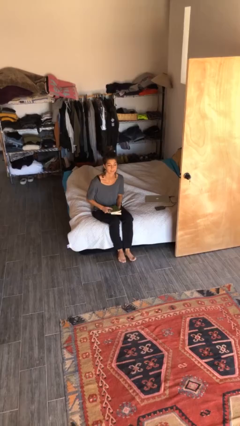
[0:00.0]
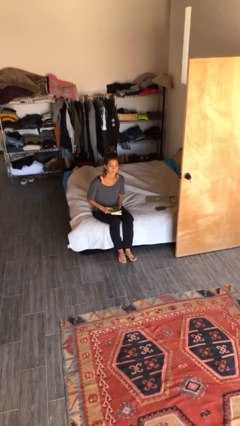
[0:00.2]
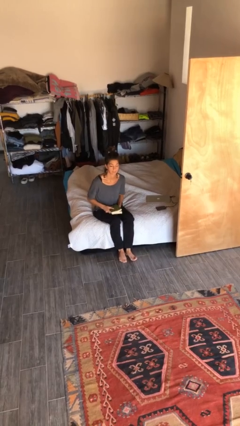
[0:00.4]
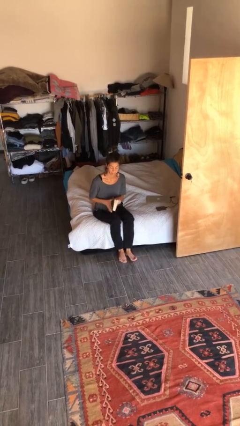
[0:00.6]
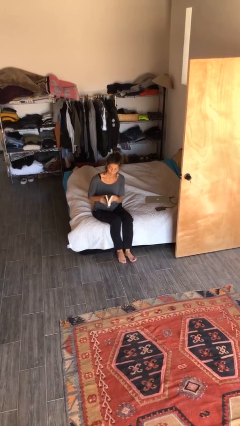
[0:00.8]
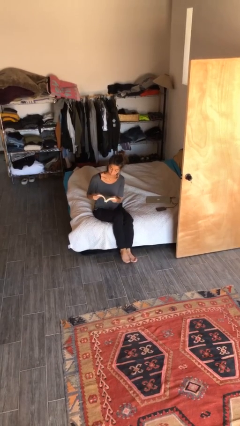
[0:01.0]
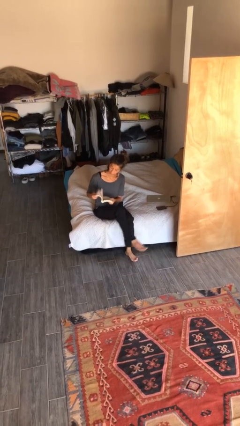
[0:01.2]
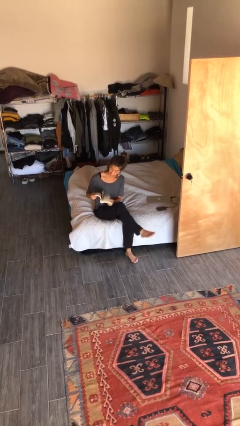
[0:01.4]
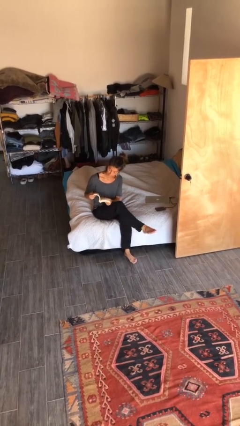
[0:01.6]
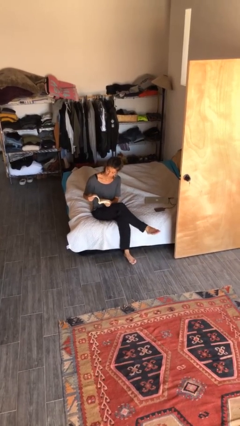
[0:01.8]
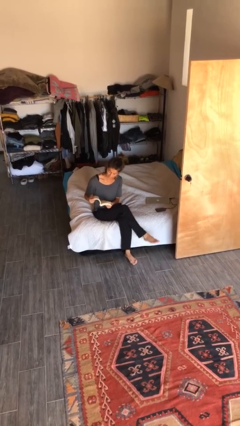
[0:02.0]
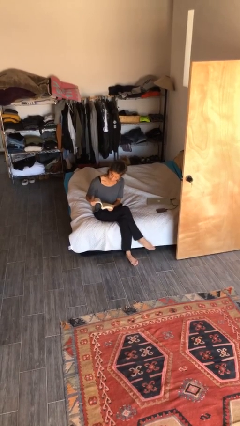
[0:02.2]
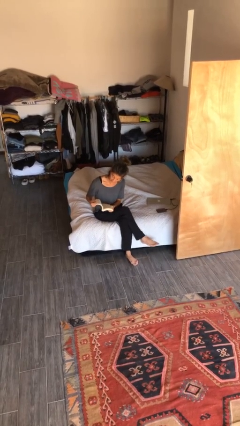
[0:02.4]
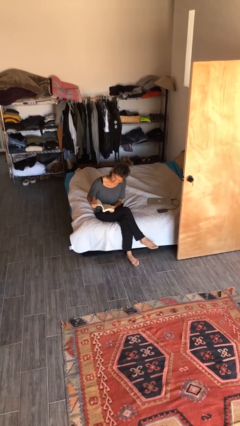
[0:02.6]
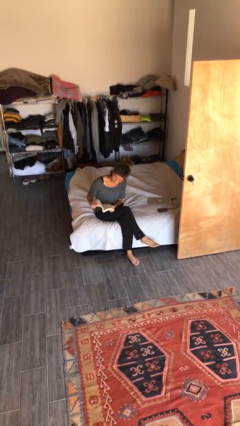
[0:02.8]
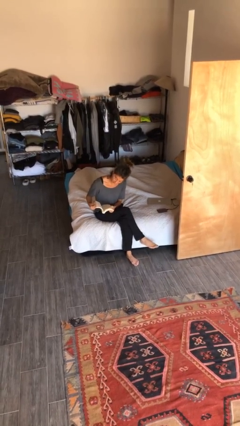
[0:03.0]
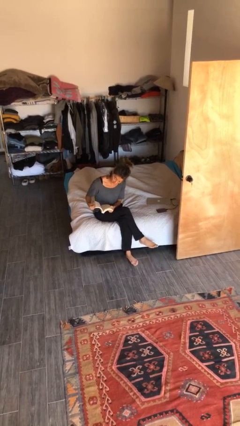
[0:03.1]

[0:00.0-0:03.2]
person reads document

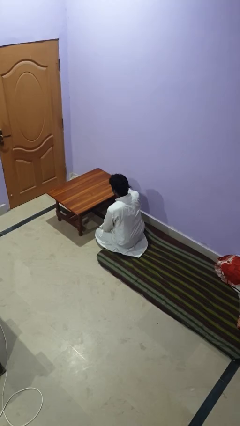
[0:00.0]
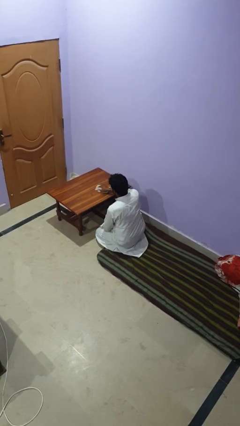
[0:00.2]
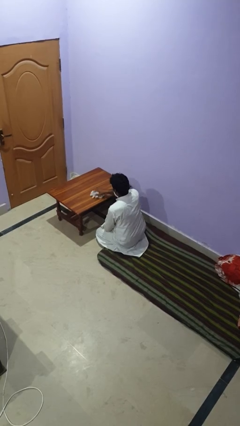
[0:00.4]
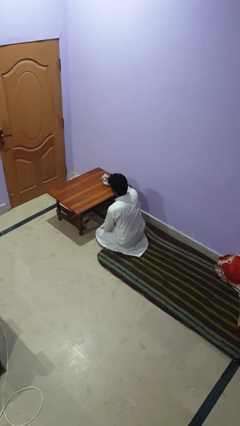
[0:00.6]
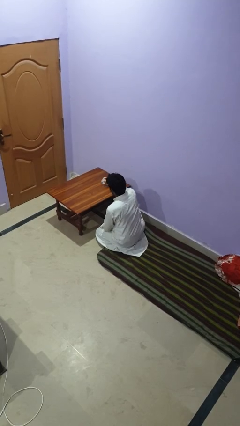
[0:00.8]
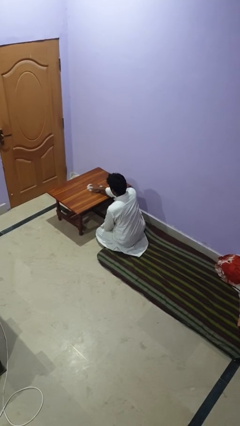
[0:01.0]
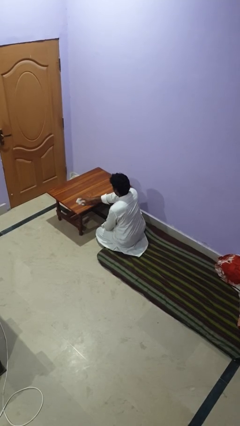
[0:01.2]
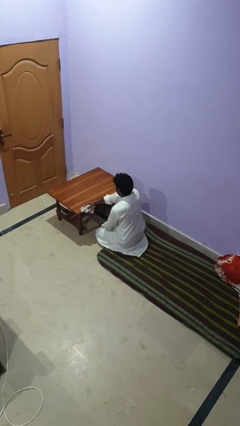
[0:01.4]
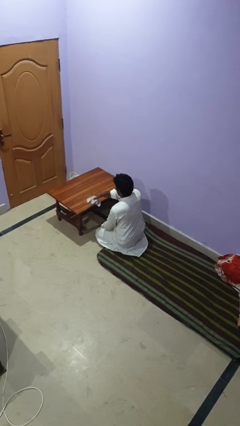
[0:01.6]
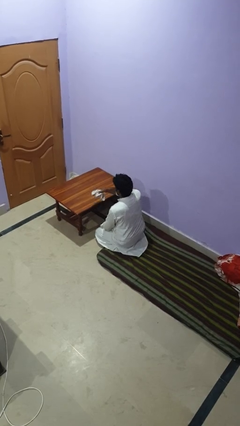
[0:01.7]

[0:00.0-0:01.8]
person cleans table with rag

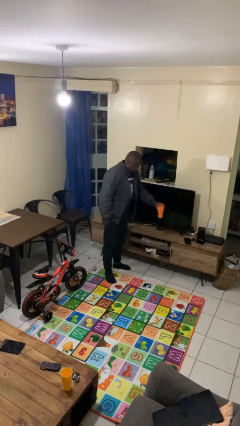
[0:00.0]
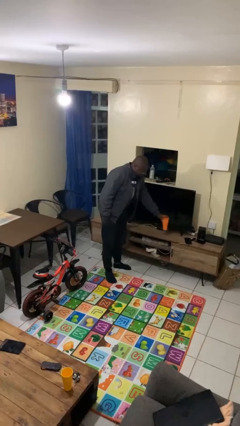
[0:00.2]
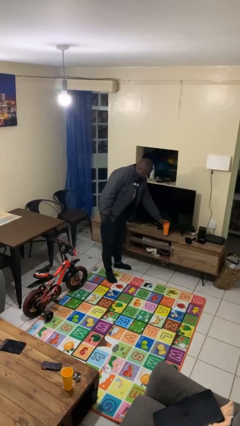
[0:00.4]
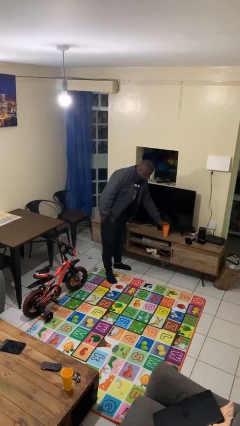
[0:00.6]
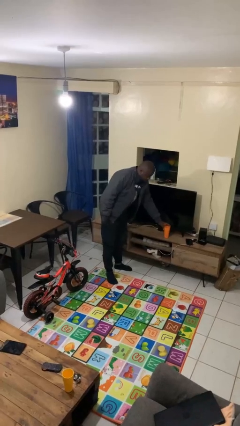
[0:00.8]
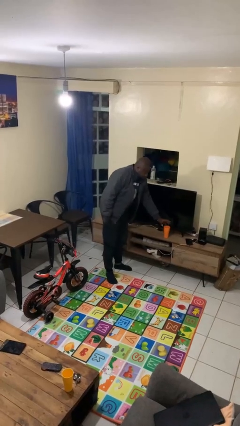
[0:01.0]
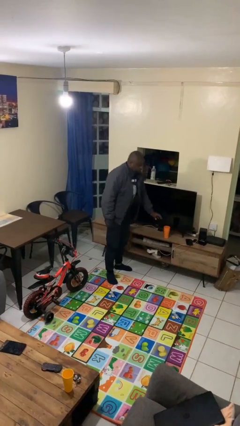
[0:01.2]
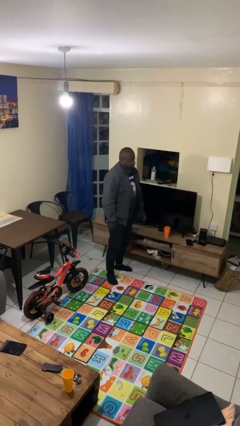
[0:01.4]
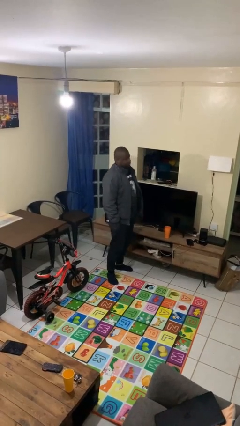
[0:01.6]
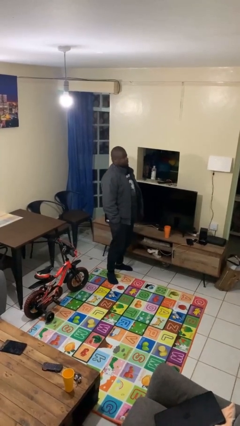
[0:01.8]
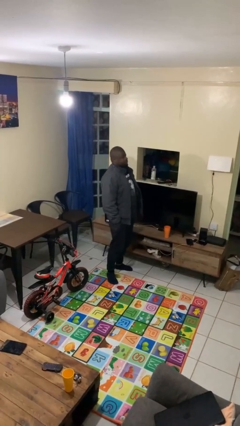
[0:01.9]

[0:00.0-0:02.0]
person puts down object on countertop

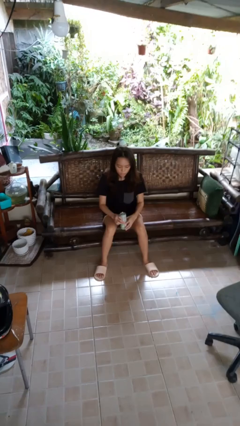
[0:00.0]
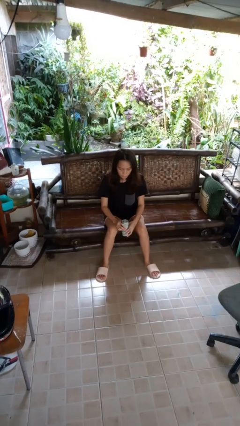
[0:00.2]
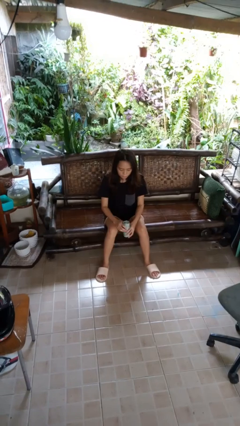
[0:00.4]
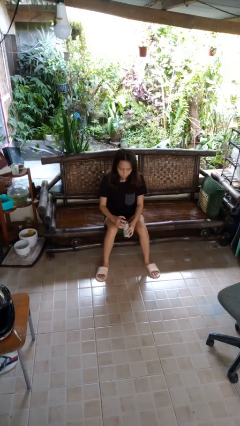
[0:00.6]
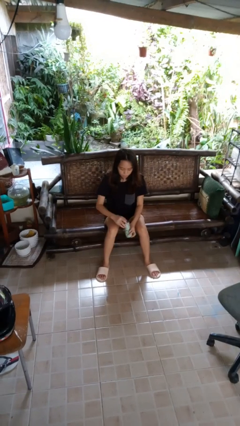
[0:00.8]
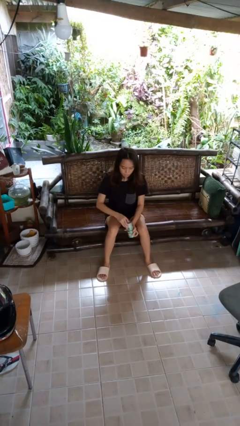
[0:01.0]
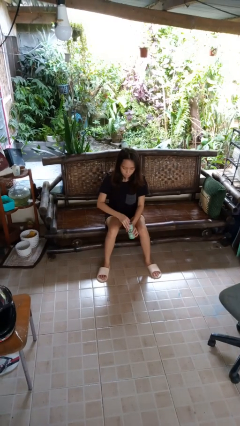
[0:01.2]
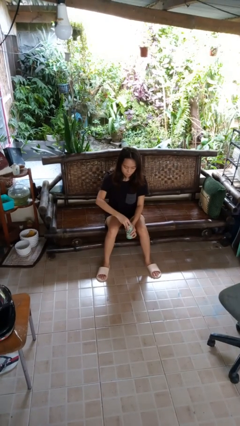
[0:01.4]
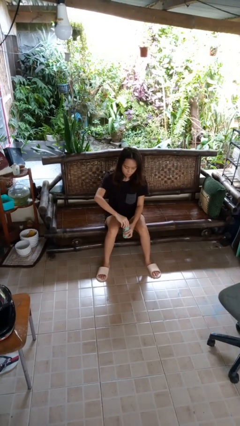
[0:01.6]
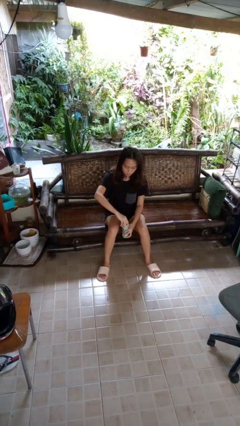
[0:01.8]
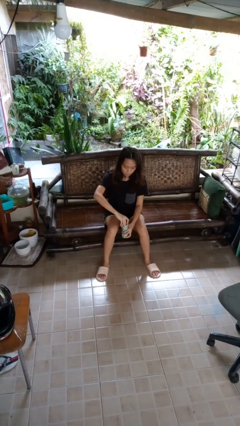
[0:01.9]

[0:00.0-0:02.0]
person opens beverage can

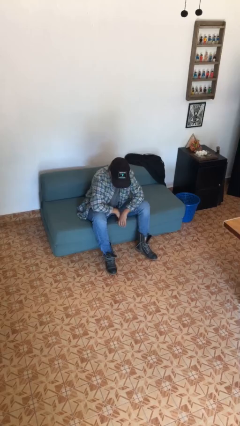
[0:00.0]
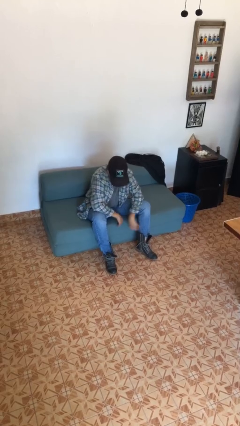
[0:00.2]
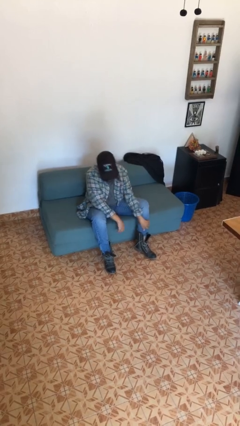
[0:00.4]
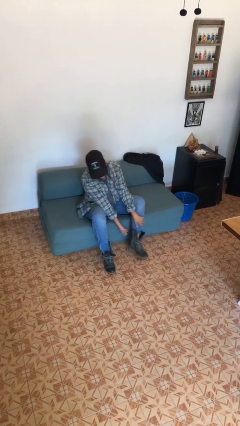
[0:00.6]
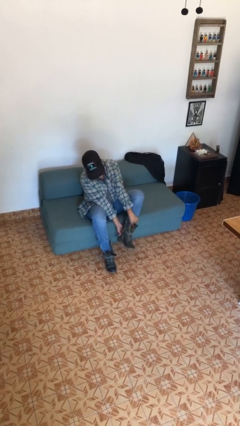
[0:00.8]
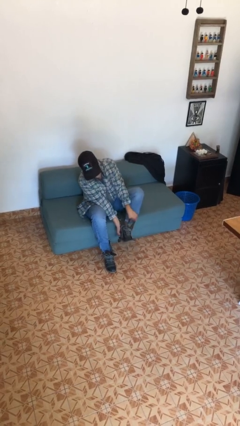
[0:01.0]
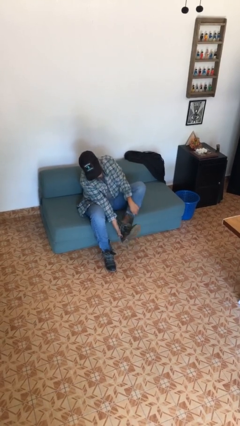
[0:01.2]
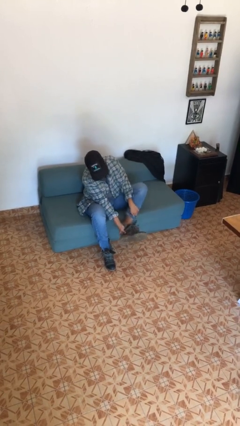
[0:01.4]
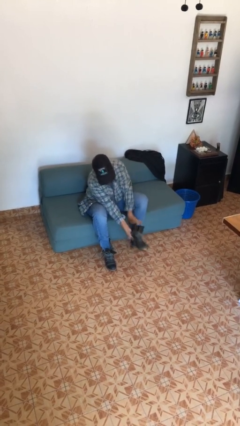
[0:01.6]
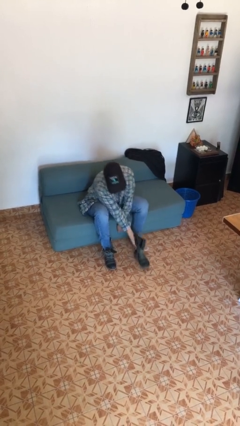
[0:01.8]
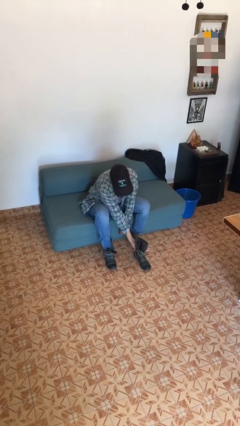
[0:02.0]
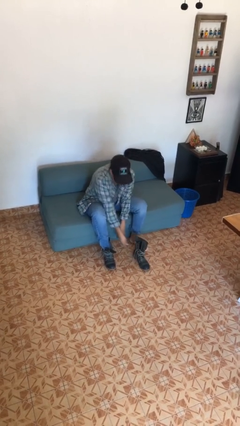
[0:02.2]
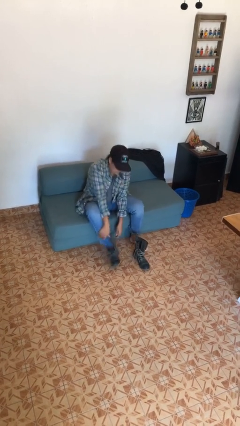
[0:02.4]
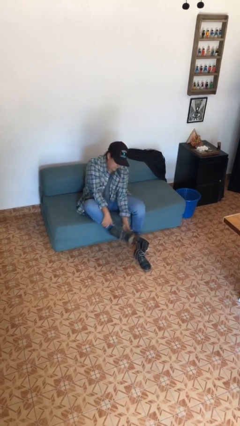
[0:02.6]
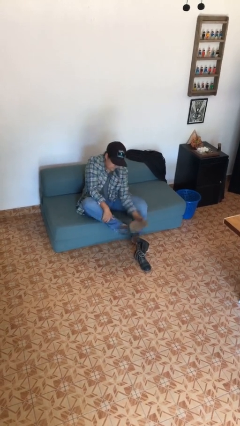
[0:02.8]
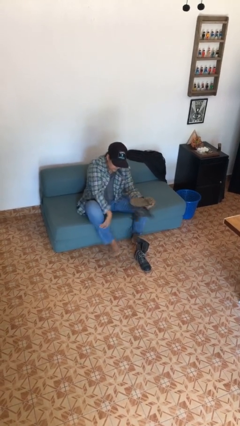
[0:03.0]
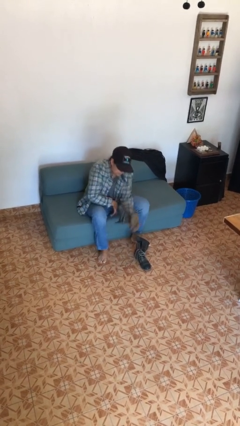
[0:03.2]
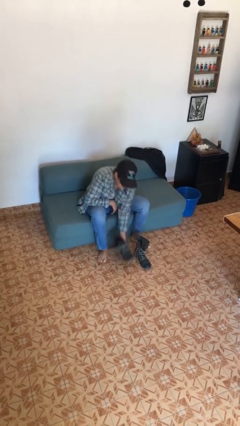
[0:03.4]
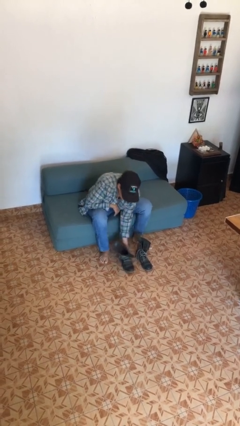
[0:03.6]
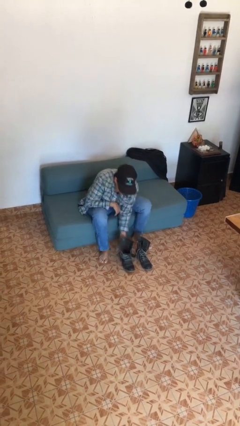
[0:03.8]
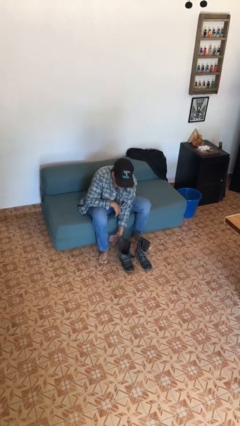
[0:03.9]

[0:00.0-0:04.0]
person takes off boots

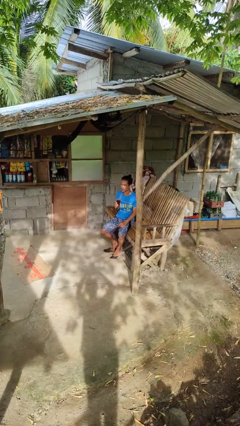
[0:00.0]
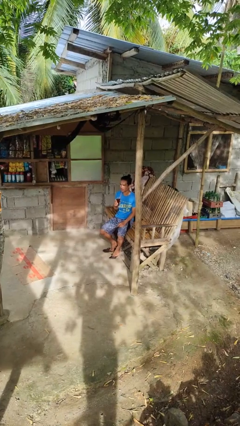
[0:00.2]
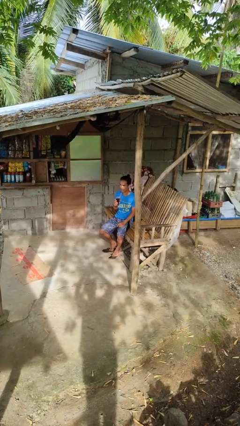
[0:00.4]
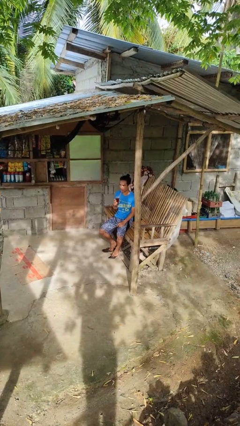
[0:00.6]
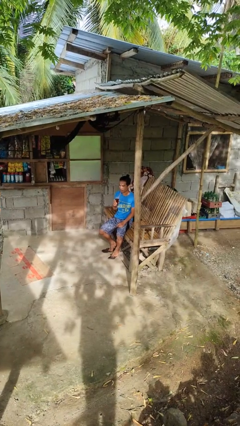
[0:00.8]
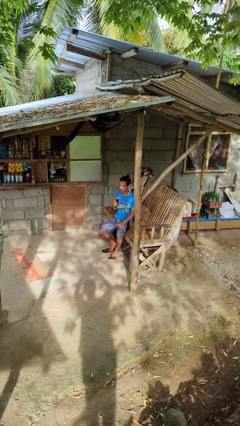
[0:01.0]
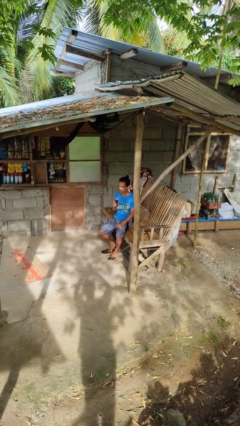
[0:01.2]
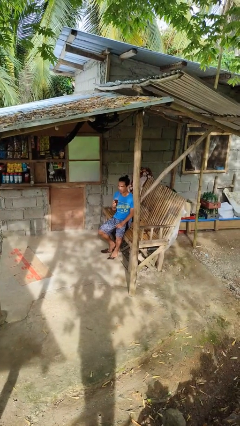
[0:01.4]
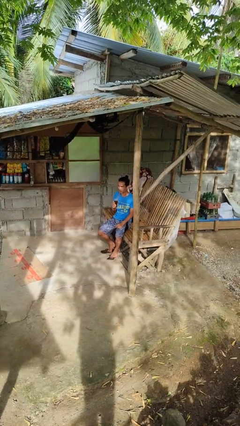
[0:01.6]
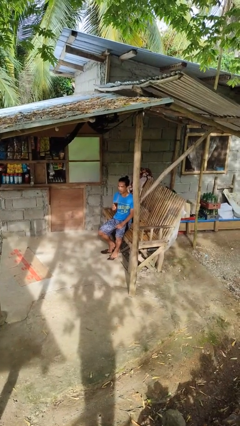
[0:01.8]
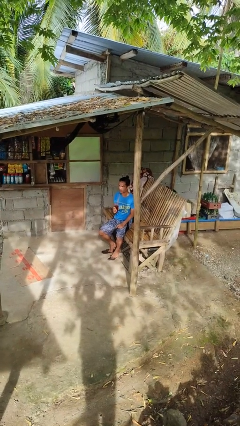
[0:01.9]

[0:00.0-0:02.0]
person drinks from straw

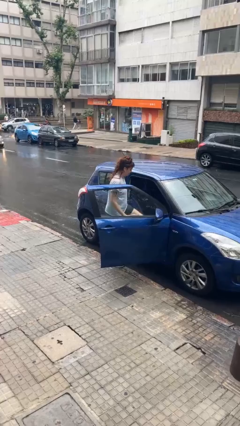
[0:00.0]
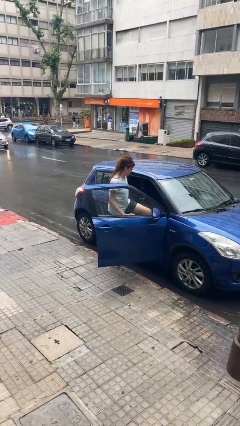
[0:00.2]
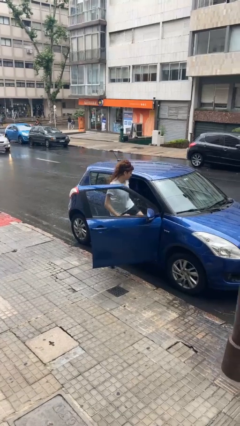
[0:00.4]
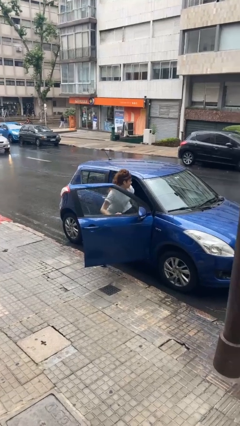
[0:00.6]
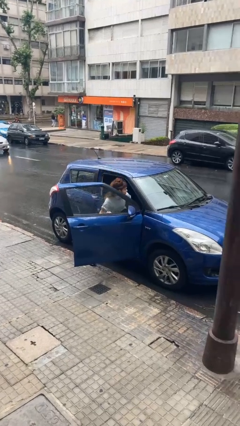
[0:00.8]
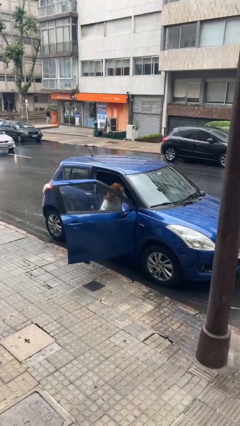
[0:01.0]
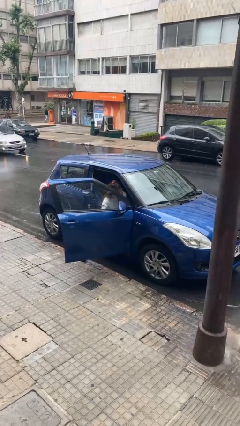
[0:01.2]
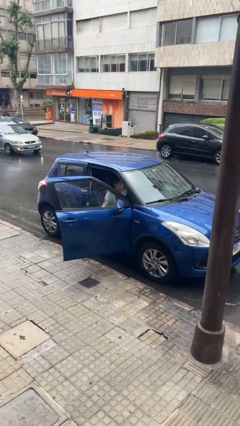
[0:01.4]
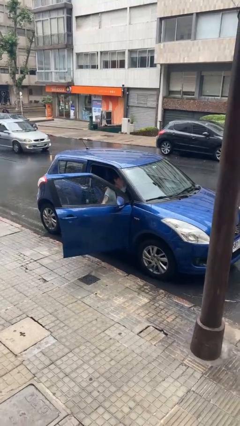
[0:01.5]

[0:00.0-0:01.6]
person enters car

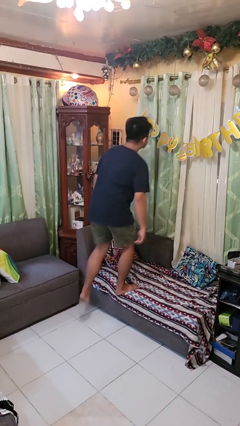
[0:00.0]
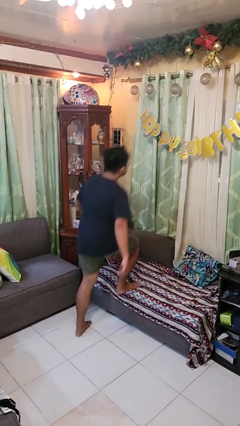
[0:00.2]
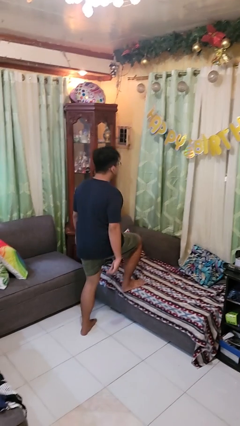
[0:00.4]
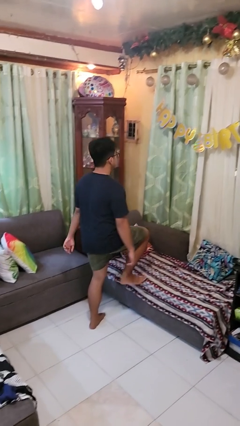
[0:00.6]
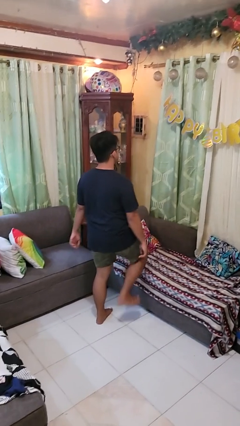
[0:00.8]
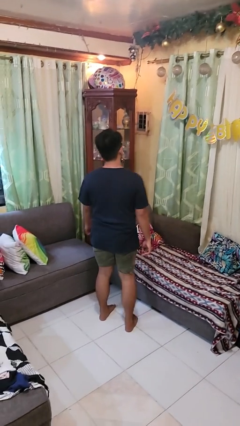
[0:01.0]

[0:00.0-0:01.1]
person climbs off couch
